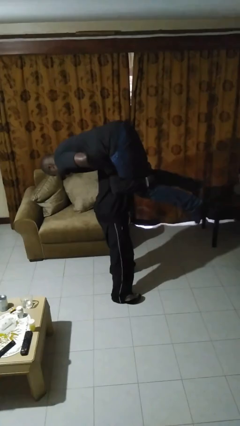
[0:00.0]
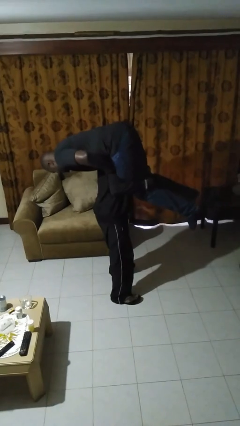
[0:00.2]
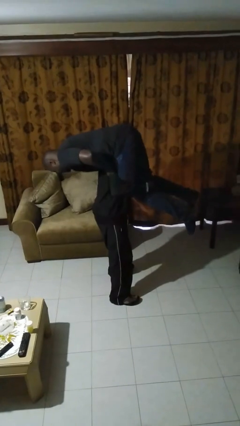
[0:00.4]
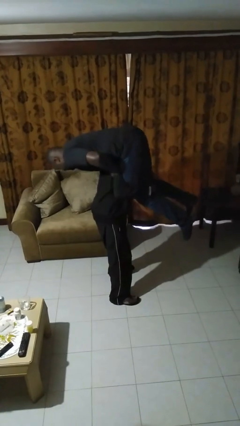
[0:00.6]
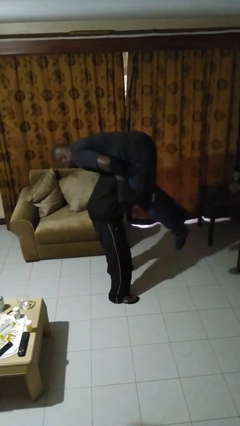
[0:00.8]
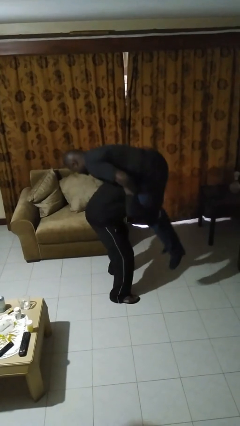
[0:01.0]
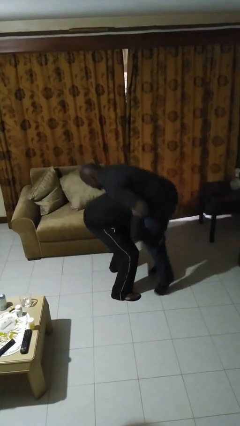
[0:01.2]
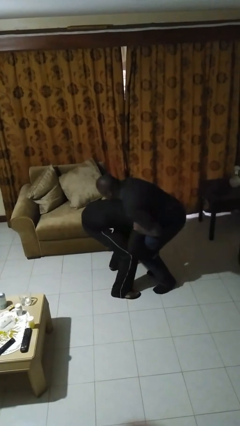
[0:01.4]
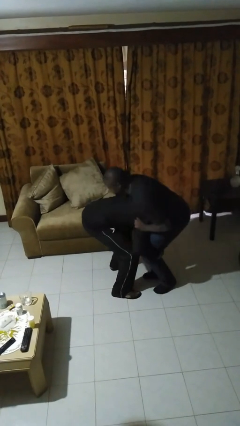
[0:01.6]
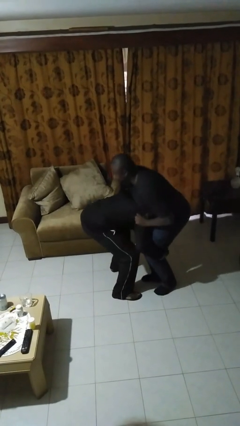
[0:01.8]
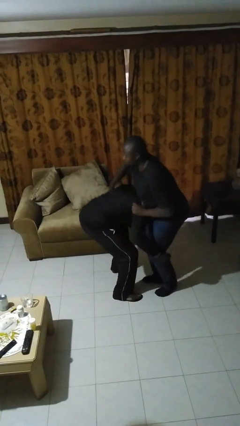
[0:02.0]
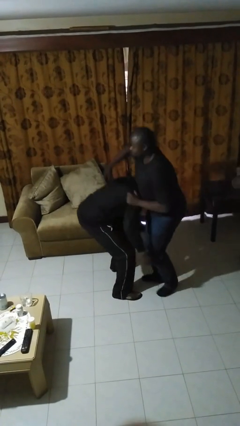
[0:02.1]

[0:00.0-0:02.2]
person puts down person

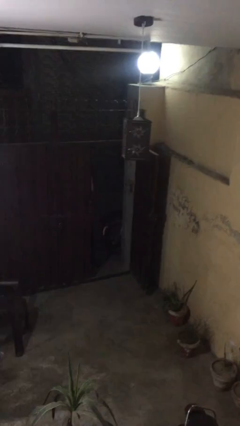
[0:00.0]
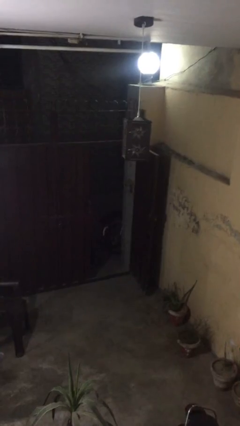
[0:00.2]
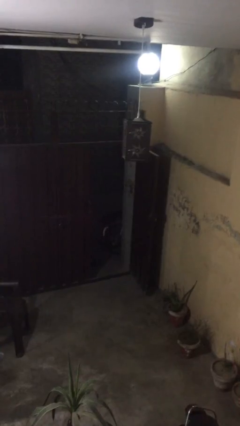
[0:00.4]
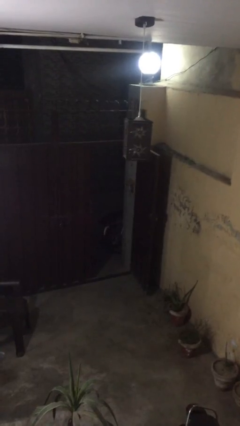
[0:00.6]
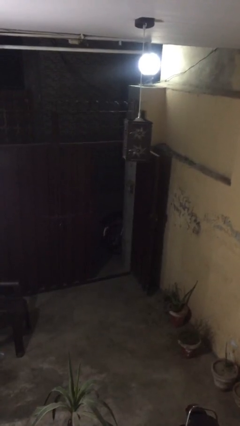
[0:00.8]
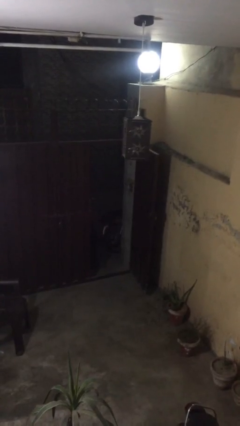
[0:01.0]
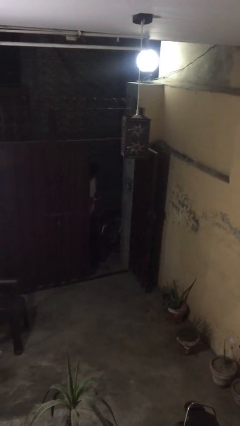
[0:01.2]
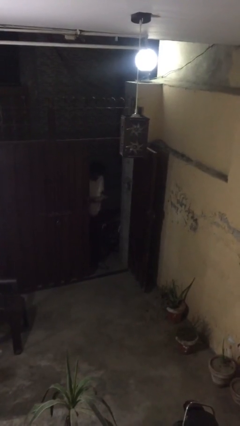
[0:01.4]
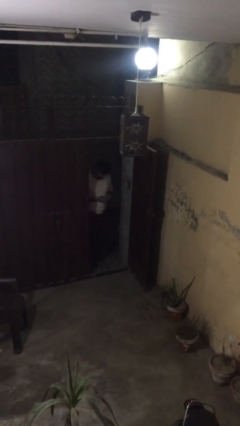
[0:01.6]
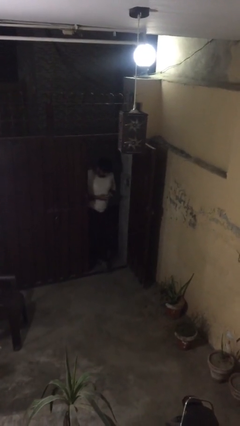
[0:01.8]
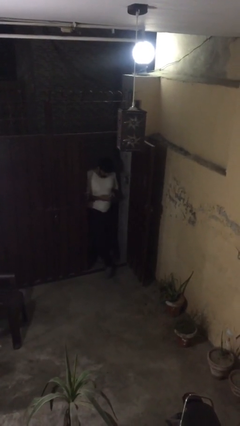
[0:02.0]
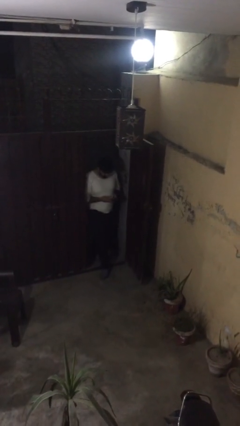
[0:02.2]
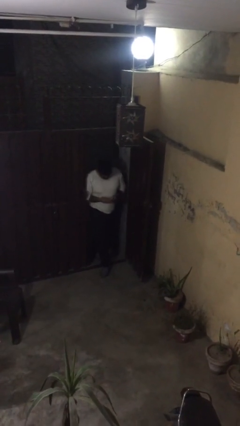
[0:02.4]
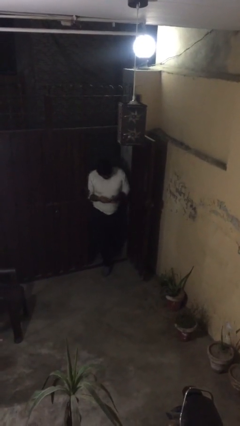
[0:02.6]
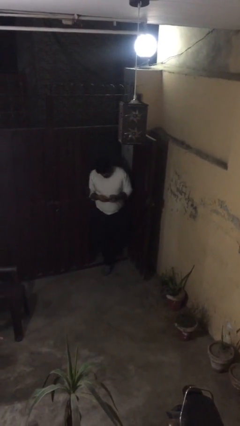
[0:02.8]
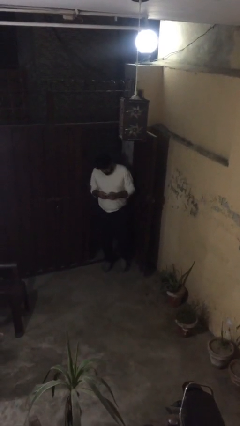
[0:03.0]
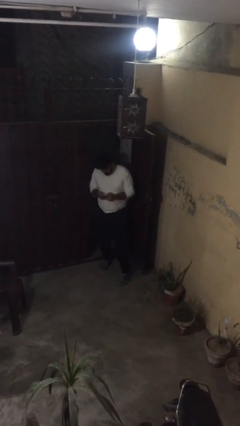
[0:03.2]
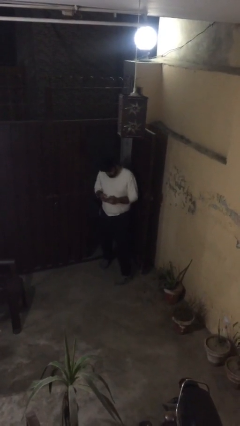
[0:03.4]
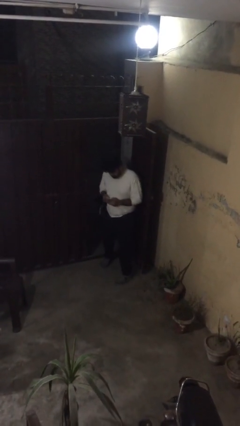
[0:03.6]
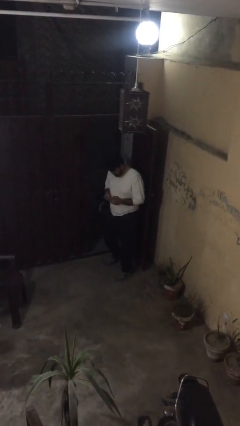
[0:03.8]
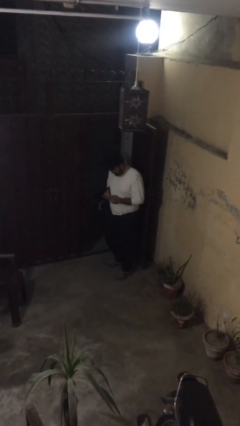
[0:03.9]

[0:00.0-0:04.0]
person enters scene through structure

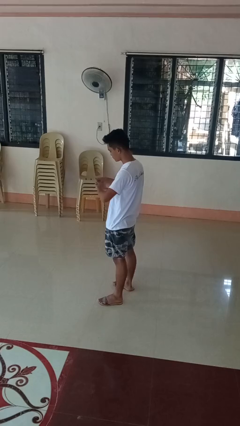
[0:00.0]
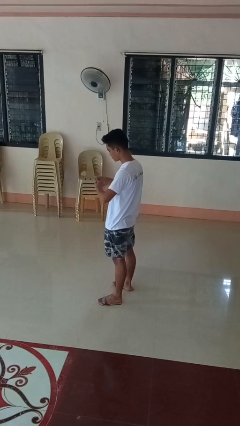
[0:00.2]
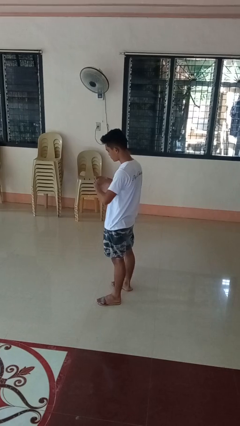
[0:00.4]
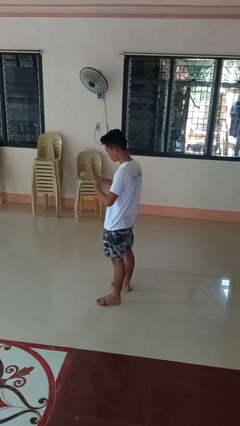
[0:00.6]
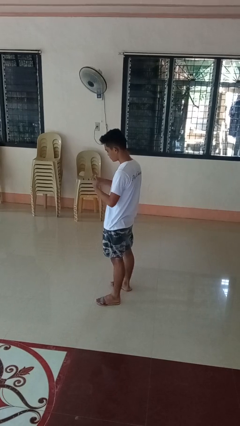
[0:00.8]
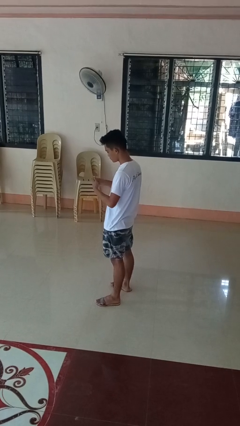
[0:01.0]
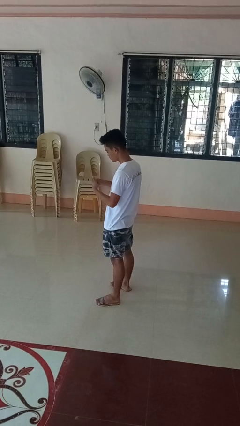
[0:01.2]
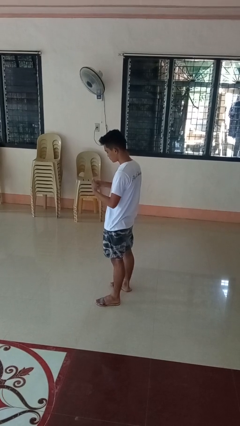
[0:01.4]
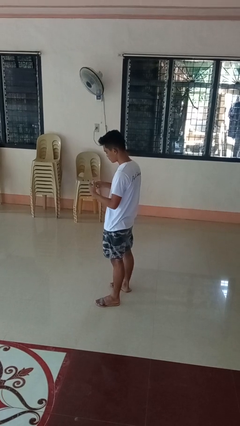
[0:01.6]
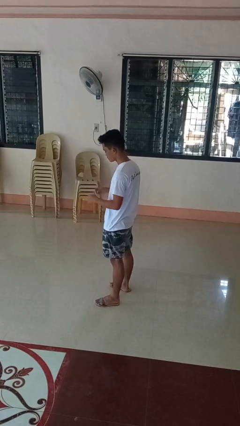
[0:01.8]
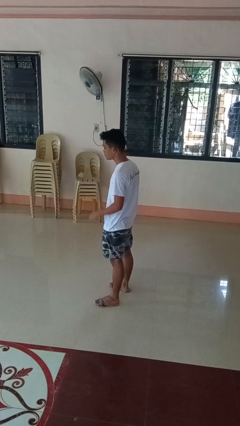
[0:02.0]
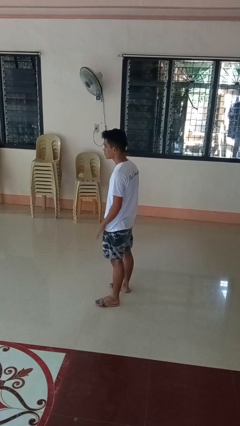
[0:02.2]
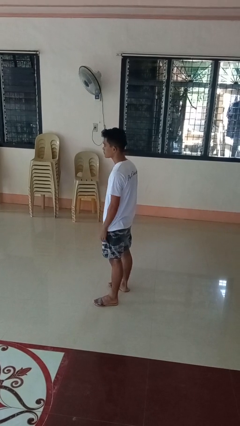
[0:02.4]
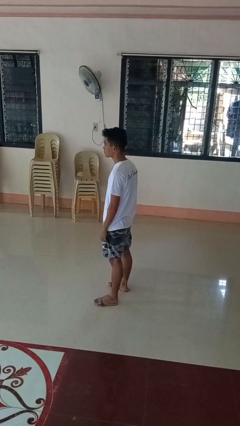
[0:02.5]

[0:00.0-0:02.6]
person takes off ring

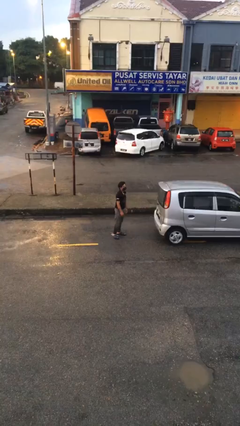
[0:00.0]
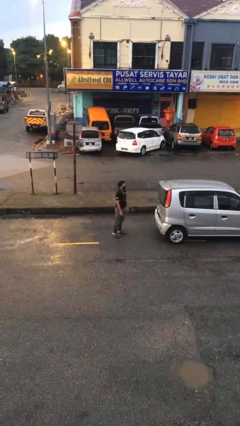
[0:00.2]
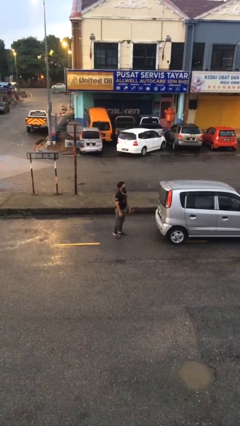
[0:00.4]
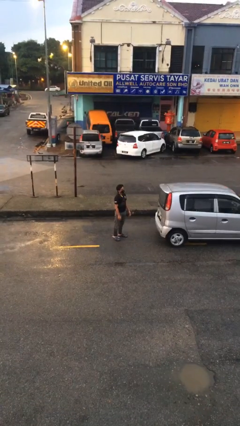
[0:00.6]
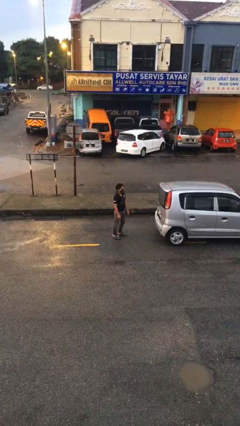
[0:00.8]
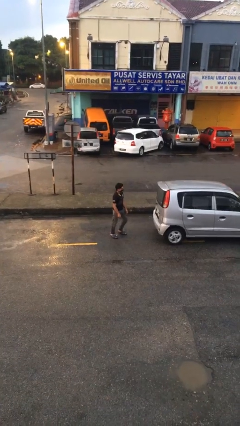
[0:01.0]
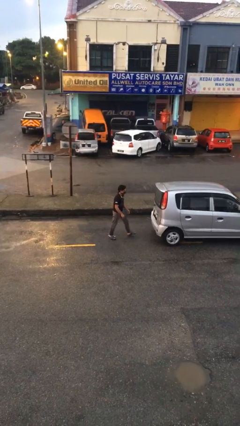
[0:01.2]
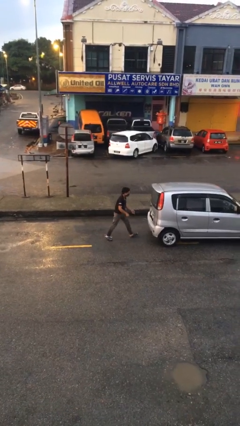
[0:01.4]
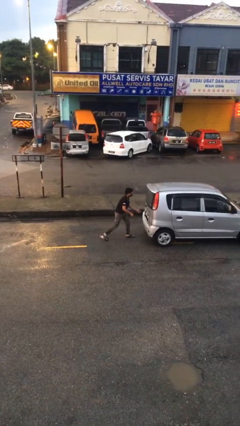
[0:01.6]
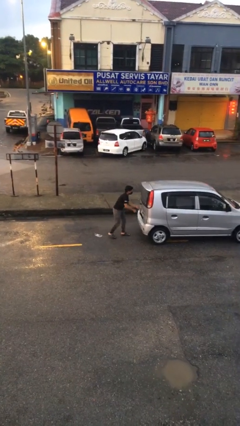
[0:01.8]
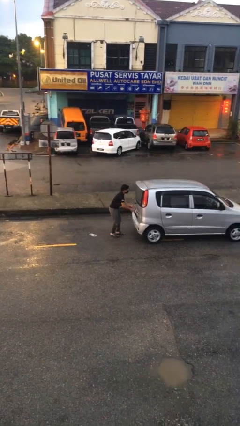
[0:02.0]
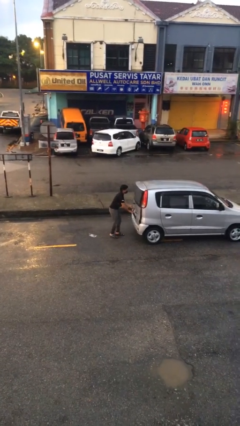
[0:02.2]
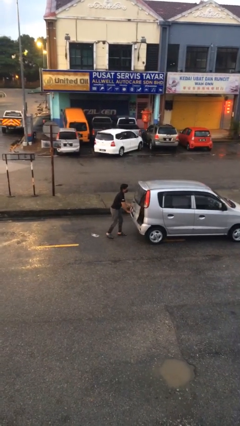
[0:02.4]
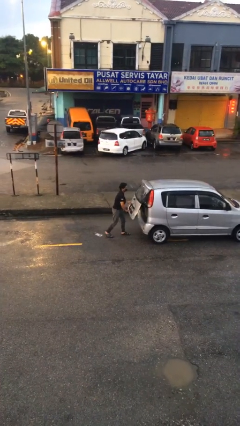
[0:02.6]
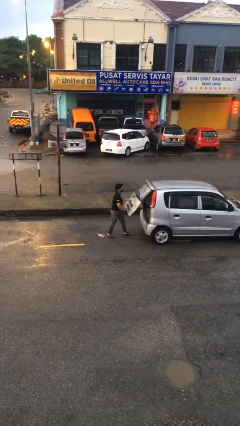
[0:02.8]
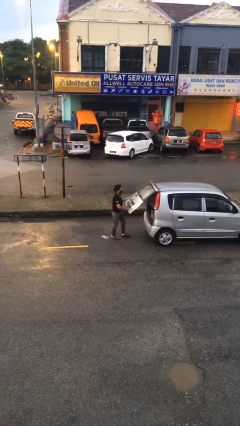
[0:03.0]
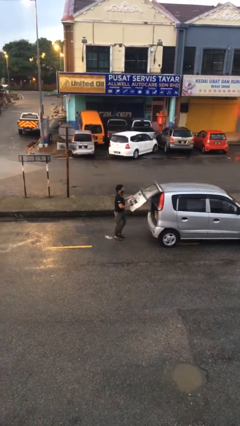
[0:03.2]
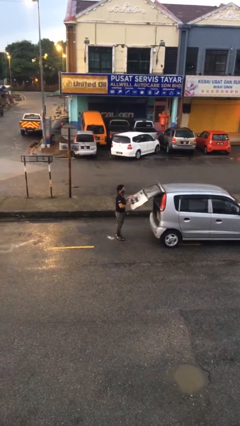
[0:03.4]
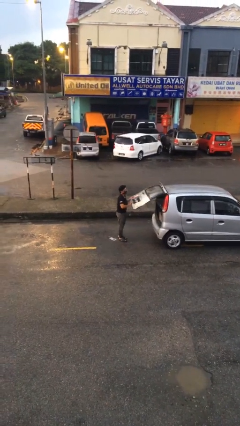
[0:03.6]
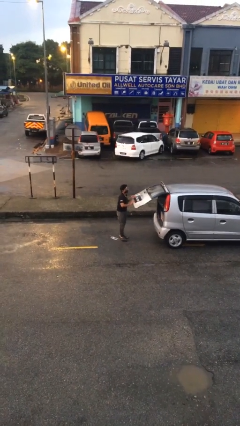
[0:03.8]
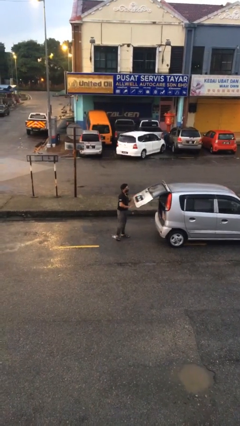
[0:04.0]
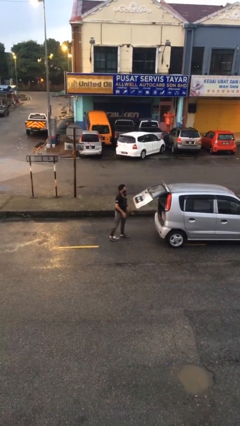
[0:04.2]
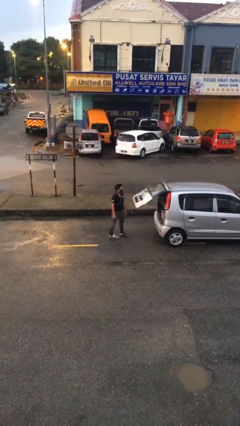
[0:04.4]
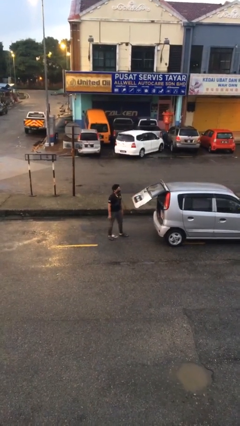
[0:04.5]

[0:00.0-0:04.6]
person opens car trunk

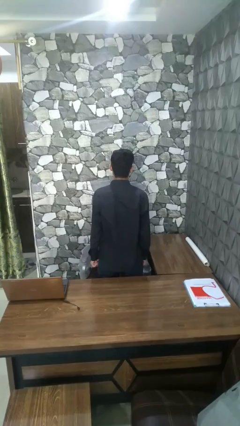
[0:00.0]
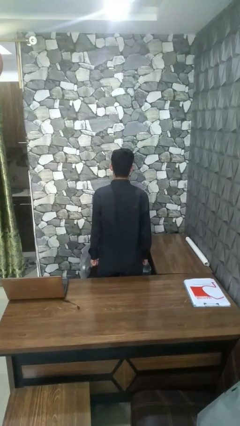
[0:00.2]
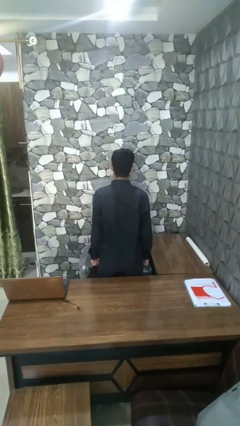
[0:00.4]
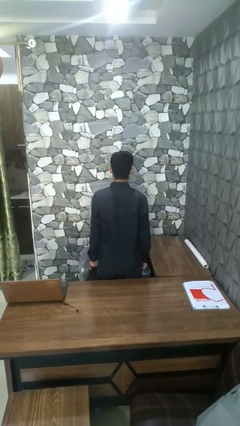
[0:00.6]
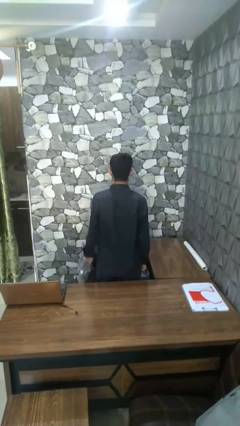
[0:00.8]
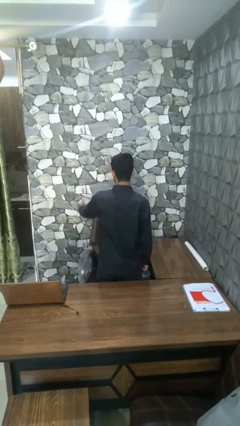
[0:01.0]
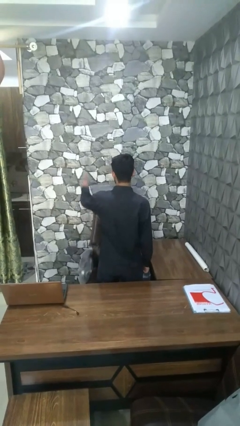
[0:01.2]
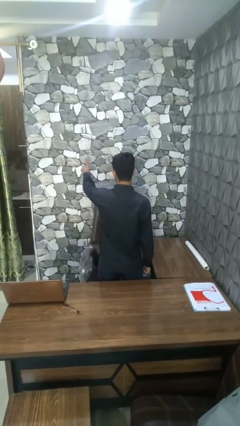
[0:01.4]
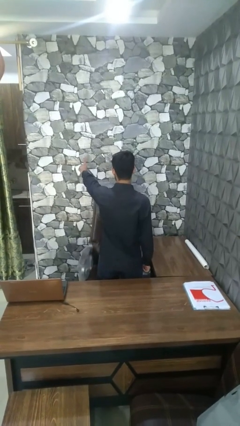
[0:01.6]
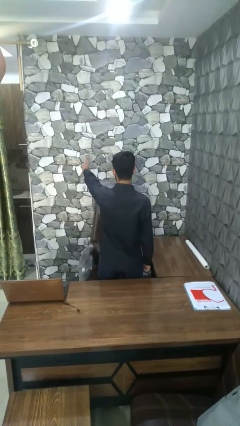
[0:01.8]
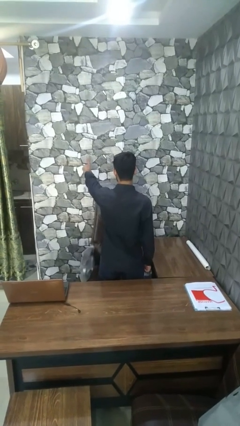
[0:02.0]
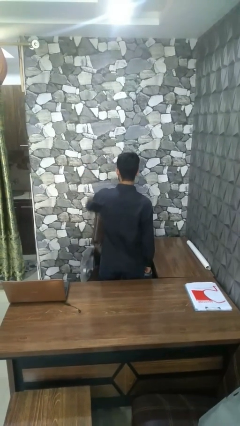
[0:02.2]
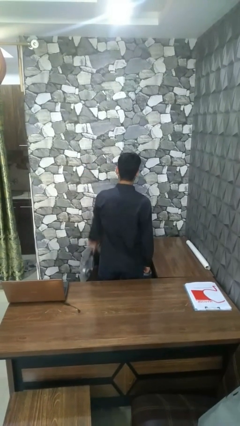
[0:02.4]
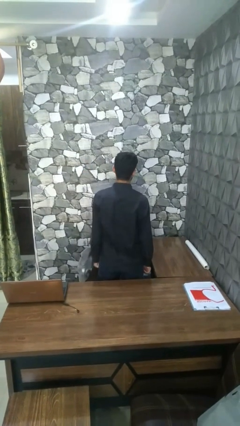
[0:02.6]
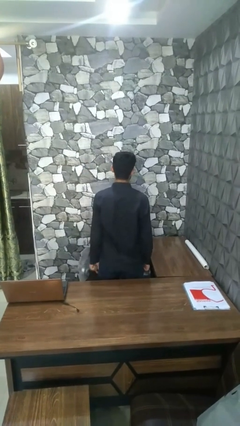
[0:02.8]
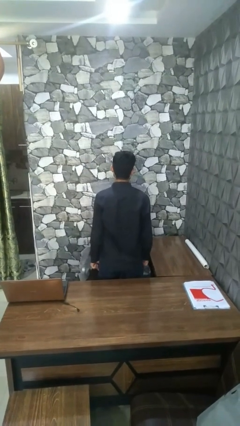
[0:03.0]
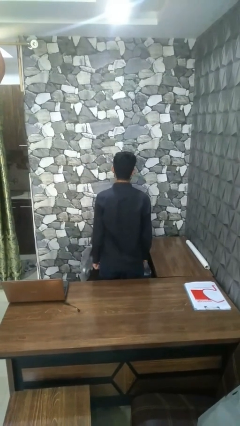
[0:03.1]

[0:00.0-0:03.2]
person gestures number one

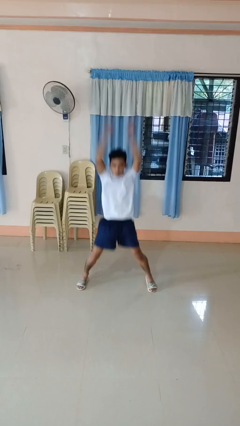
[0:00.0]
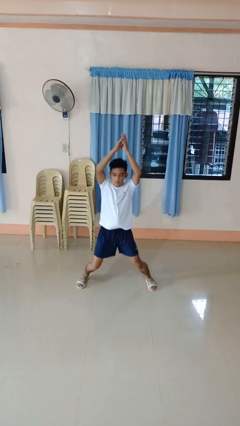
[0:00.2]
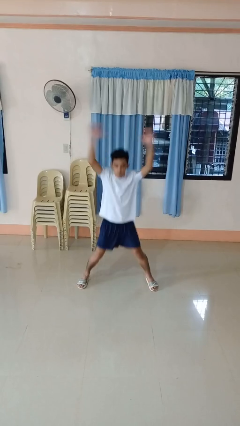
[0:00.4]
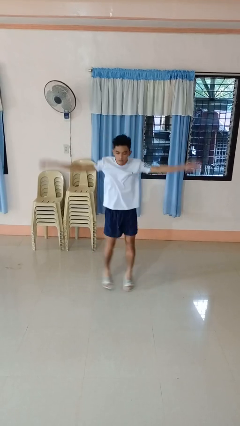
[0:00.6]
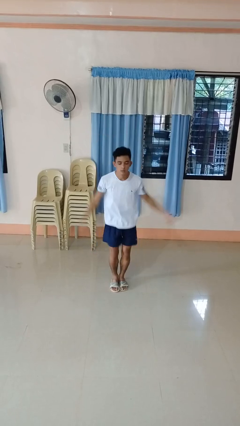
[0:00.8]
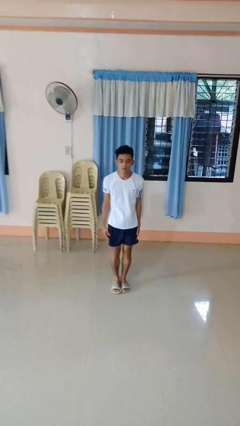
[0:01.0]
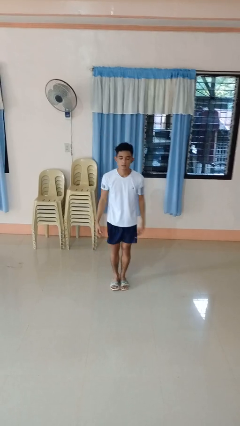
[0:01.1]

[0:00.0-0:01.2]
person exercises with jumping jacks
